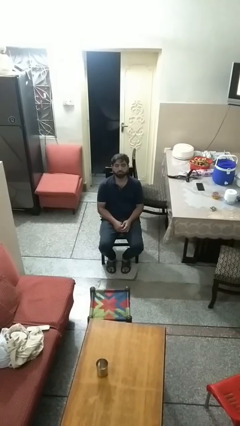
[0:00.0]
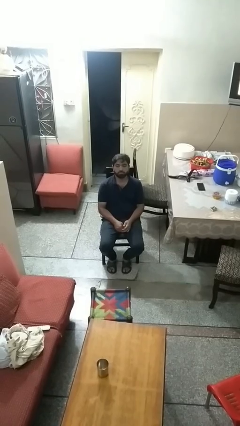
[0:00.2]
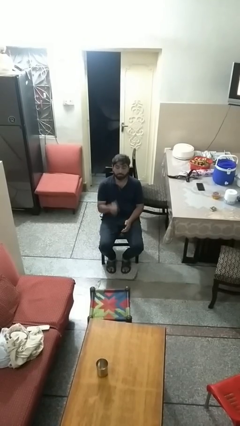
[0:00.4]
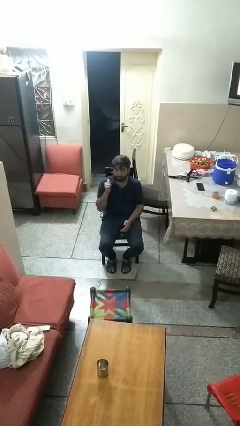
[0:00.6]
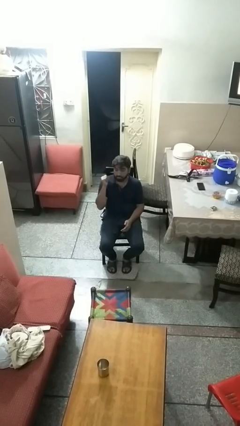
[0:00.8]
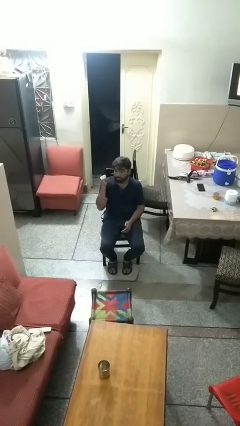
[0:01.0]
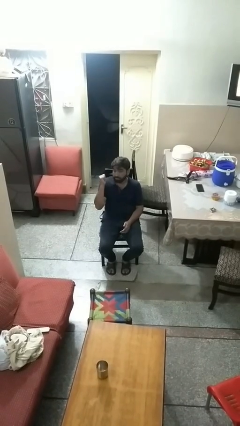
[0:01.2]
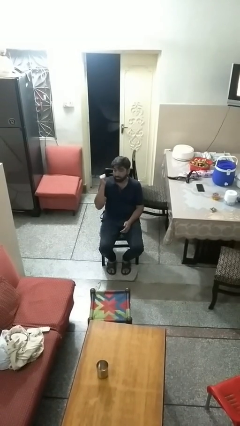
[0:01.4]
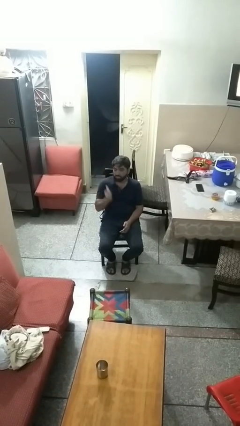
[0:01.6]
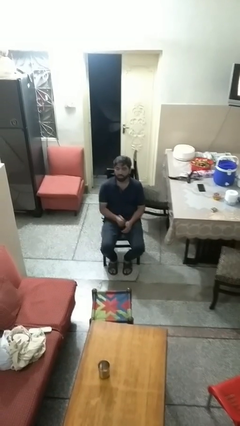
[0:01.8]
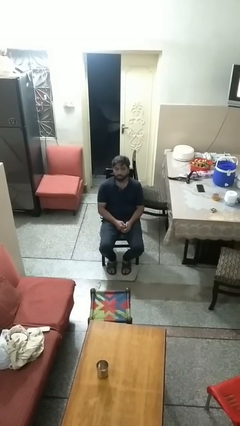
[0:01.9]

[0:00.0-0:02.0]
person gestures behind me

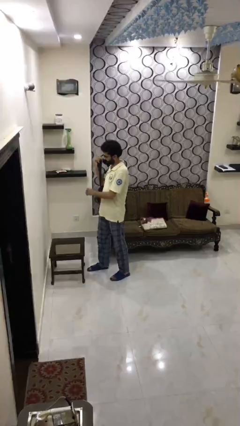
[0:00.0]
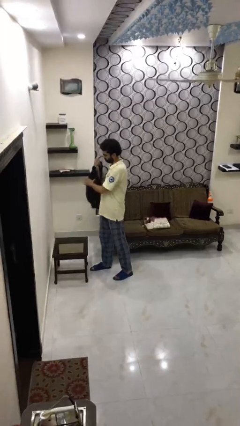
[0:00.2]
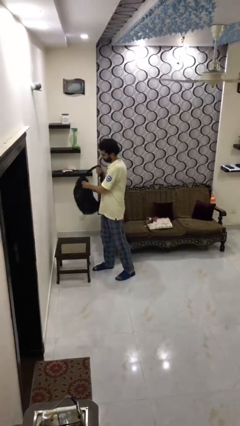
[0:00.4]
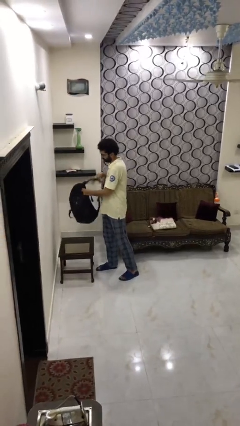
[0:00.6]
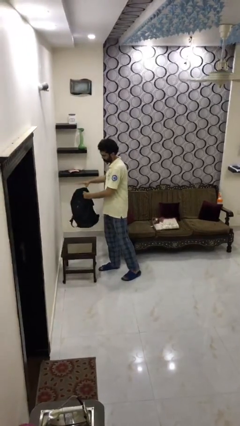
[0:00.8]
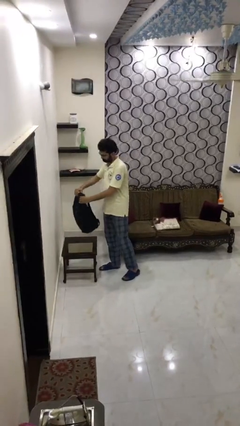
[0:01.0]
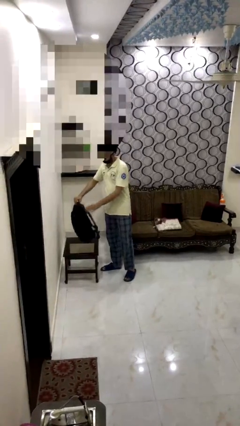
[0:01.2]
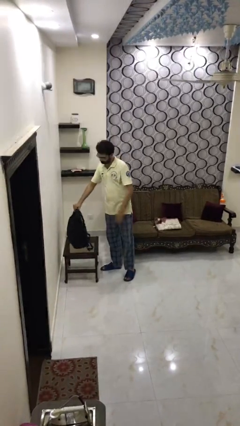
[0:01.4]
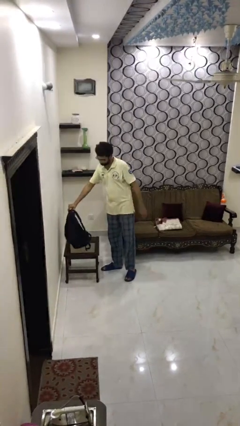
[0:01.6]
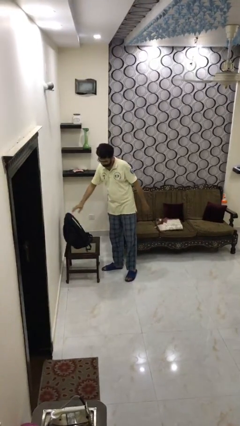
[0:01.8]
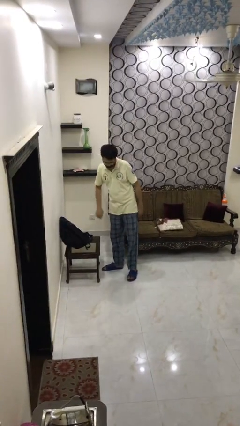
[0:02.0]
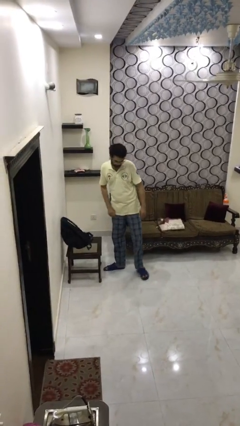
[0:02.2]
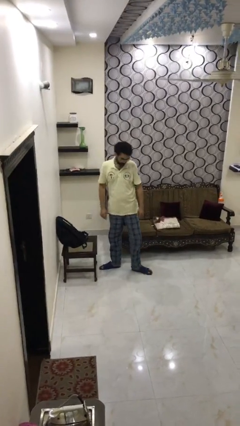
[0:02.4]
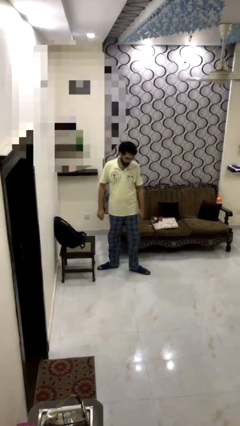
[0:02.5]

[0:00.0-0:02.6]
person puts down object on table

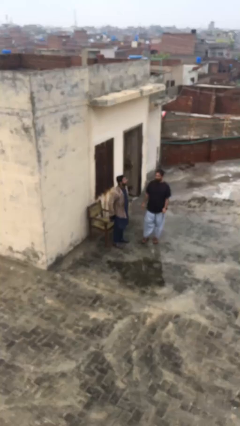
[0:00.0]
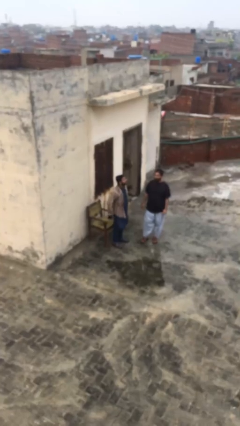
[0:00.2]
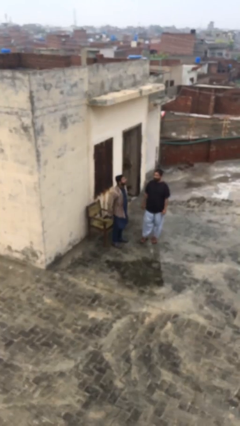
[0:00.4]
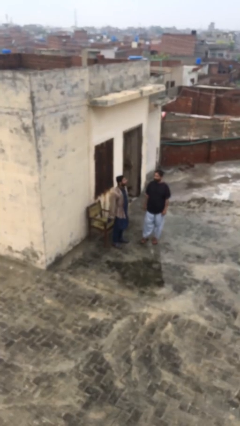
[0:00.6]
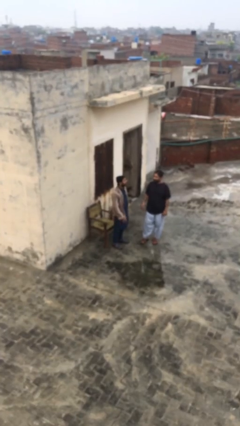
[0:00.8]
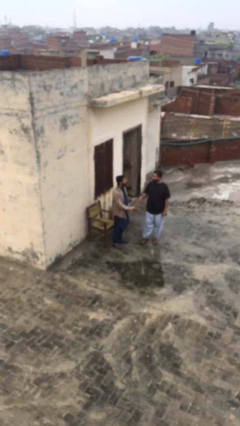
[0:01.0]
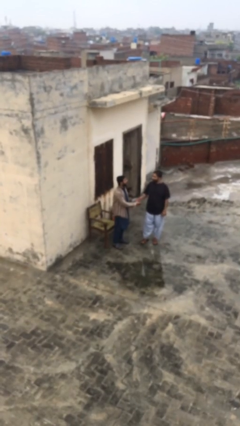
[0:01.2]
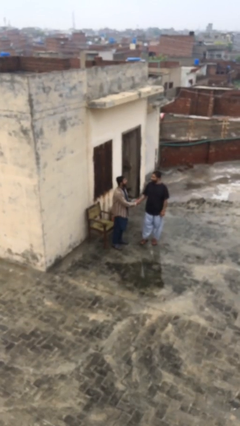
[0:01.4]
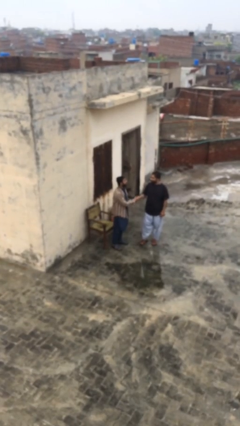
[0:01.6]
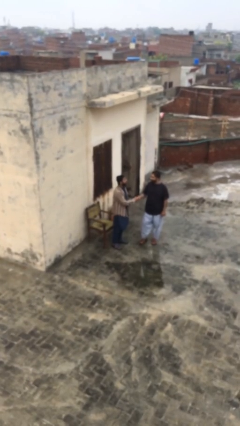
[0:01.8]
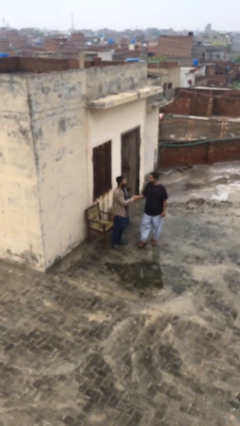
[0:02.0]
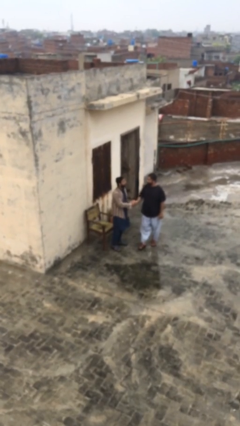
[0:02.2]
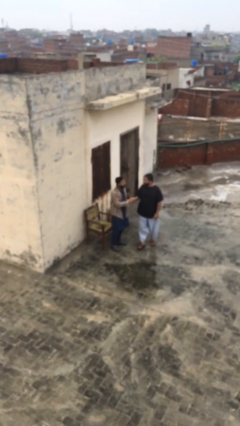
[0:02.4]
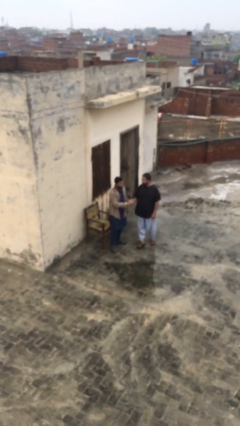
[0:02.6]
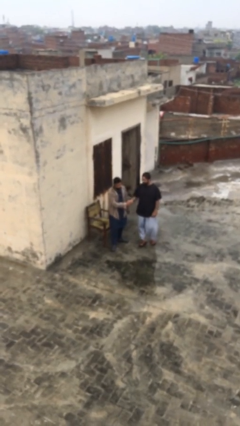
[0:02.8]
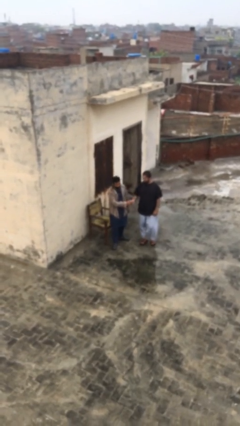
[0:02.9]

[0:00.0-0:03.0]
person shakes hand

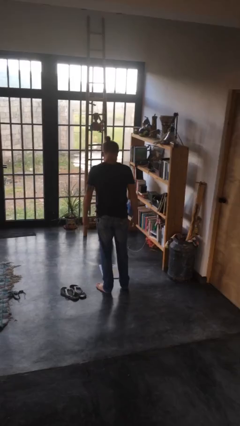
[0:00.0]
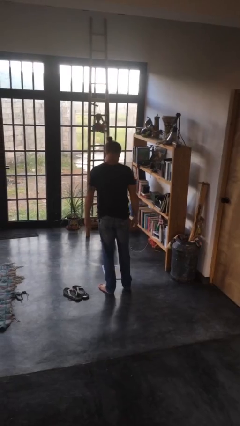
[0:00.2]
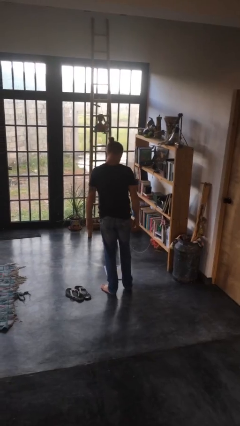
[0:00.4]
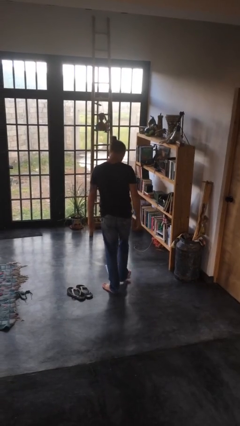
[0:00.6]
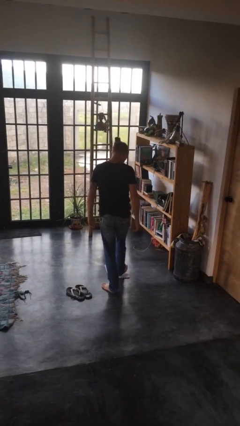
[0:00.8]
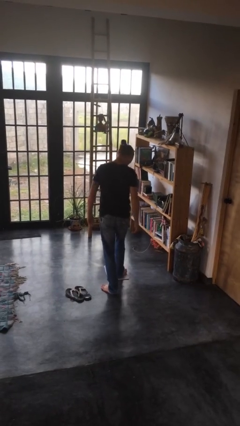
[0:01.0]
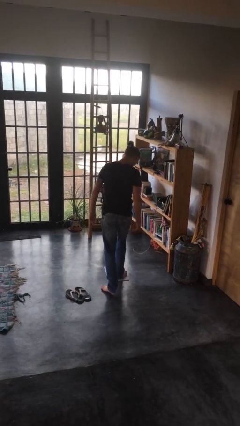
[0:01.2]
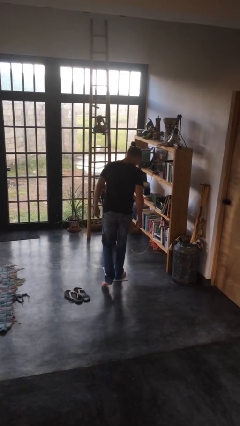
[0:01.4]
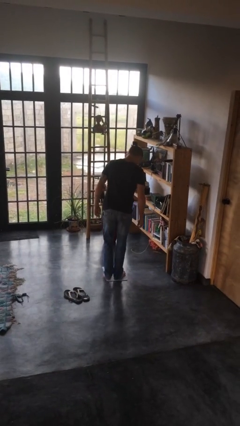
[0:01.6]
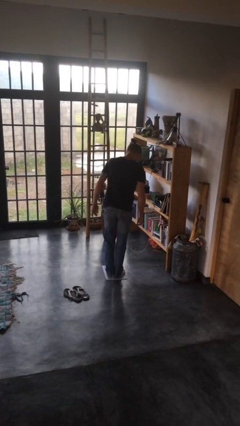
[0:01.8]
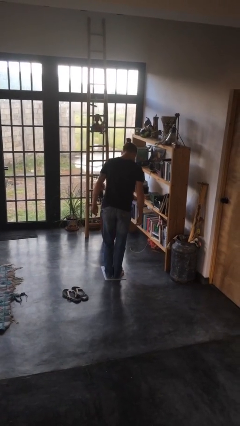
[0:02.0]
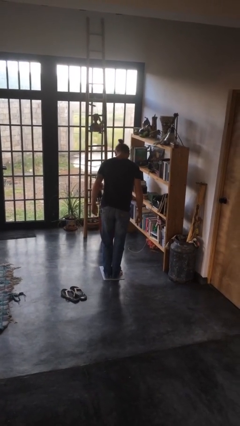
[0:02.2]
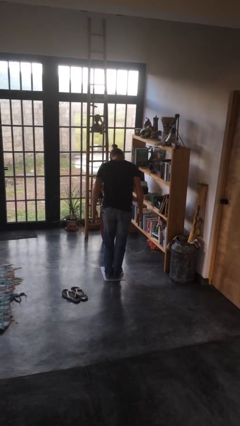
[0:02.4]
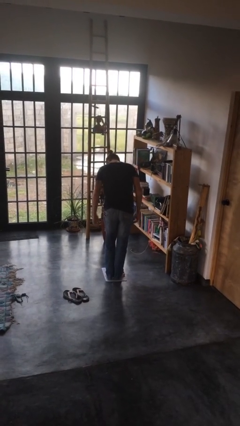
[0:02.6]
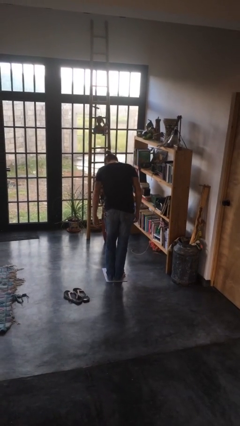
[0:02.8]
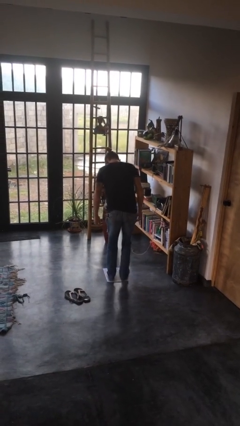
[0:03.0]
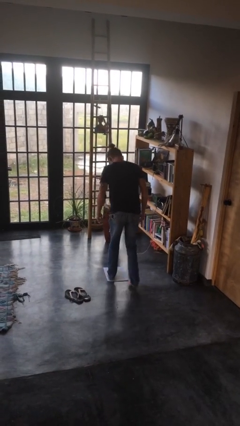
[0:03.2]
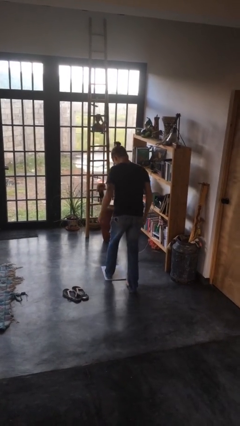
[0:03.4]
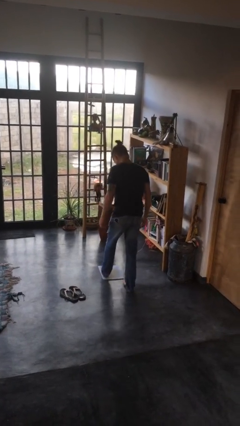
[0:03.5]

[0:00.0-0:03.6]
person uses bodyweight scale

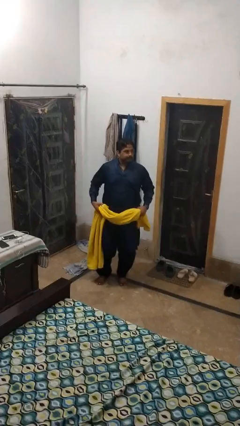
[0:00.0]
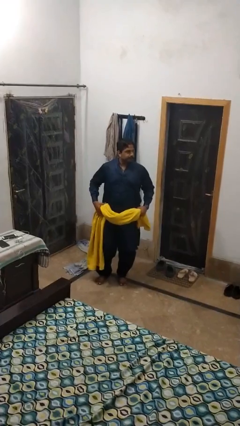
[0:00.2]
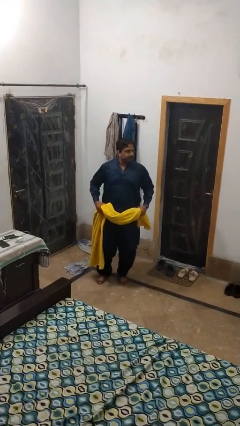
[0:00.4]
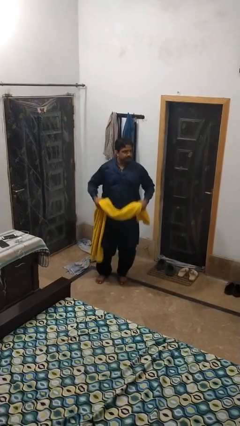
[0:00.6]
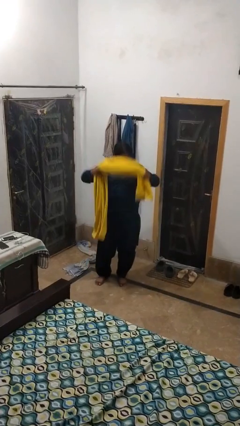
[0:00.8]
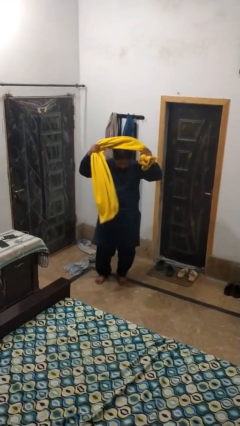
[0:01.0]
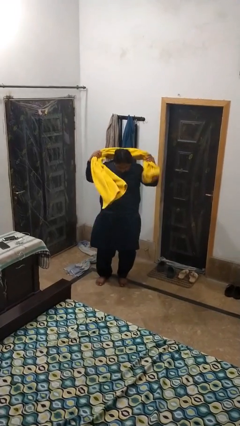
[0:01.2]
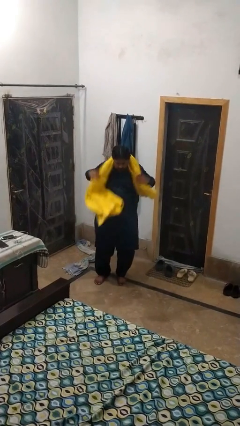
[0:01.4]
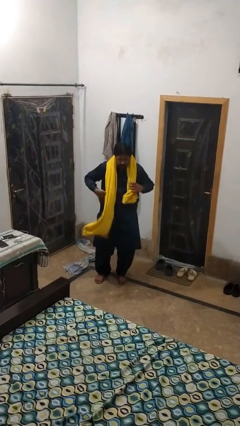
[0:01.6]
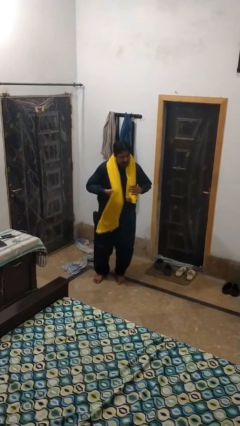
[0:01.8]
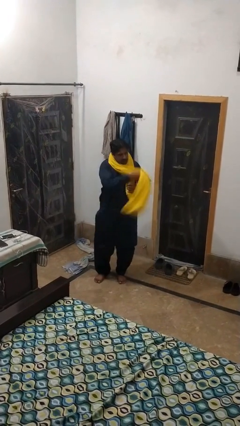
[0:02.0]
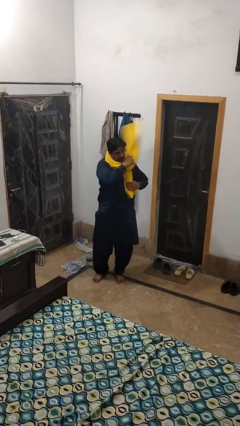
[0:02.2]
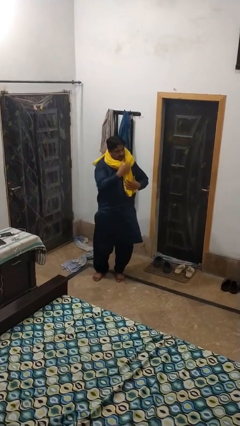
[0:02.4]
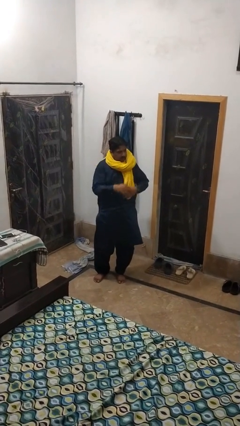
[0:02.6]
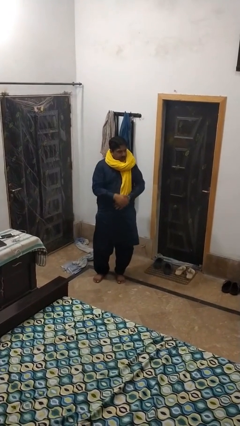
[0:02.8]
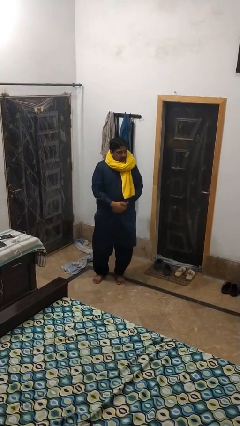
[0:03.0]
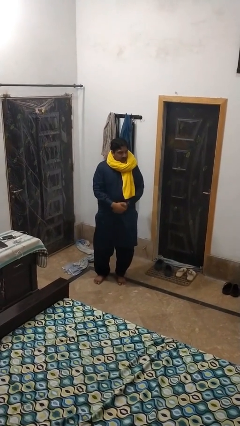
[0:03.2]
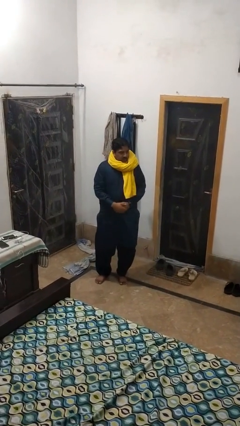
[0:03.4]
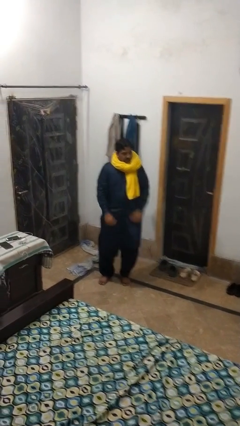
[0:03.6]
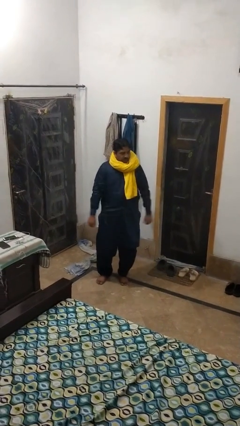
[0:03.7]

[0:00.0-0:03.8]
person puts on scarf

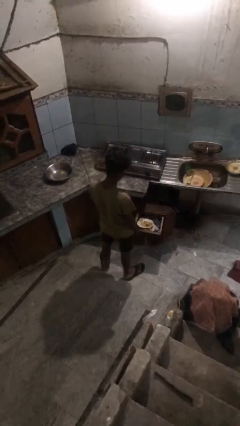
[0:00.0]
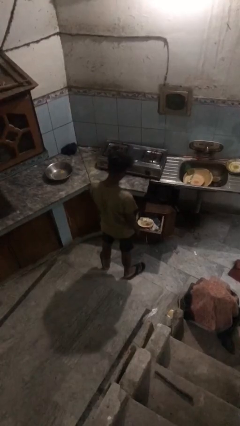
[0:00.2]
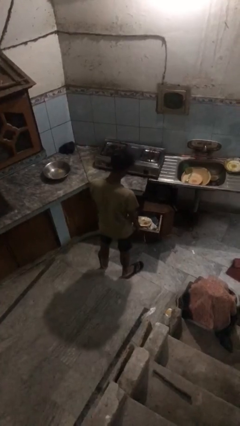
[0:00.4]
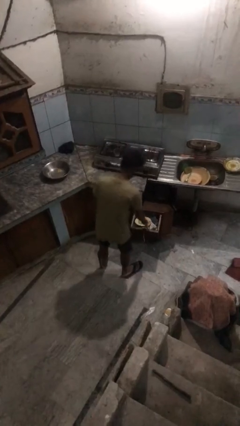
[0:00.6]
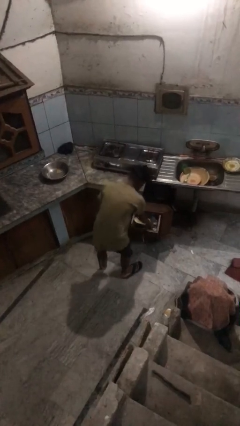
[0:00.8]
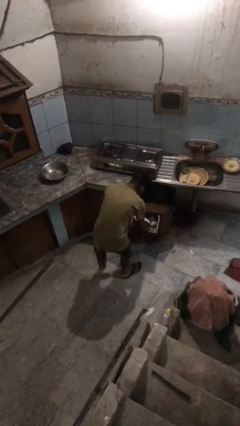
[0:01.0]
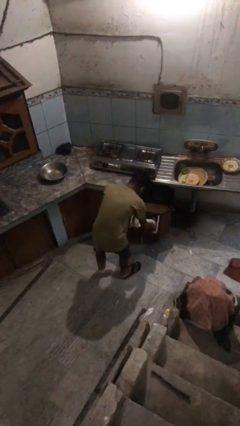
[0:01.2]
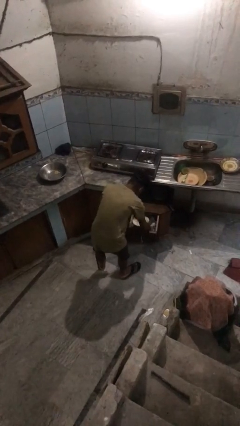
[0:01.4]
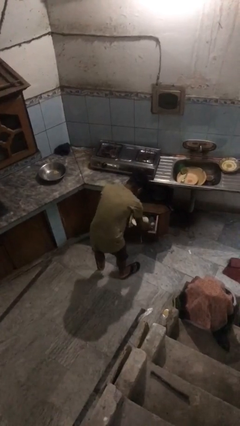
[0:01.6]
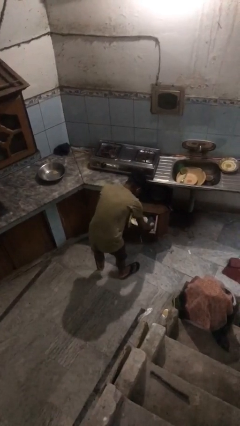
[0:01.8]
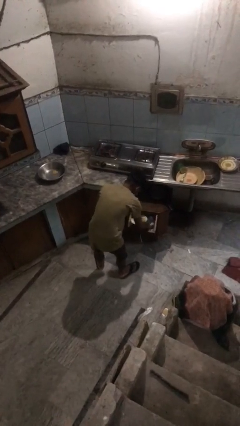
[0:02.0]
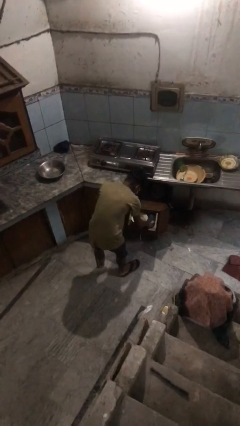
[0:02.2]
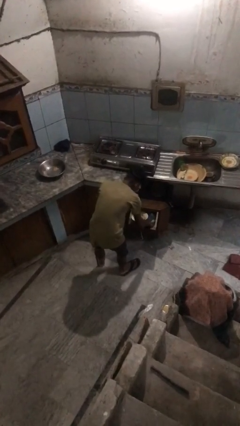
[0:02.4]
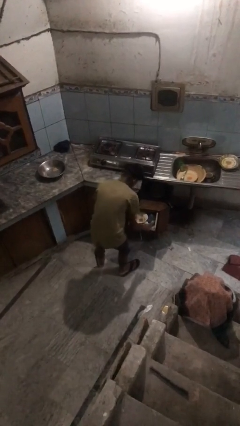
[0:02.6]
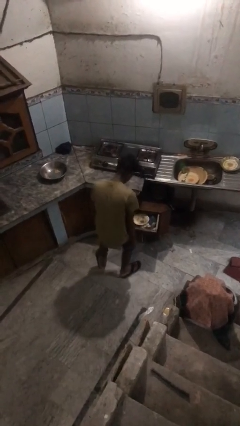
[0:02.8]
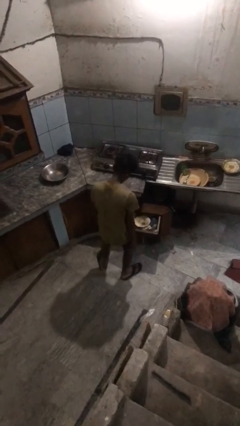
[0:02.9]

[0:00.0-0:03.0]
person searches in kitchen drawer
